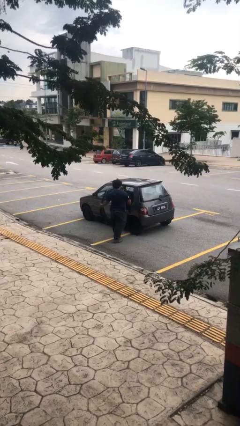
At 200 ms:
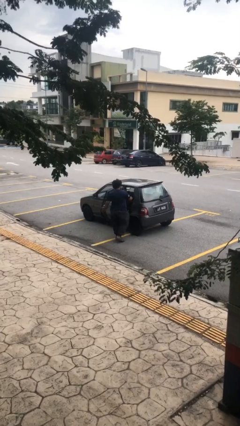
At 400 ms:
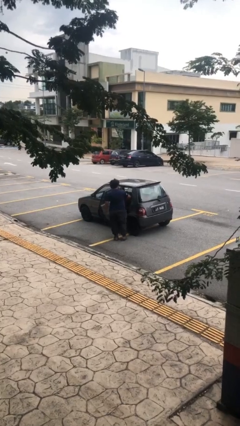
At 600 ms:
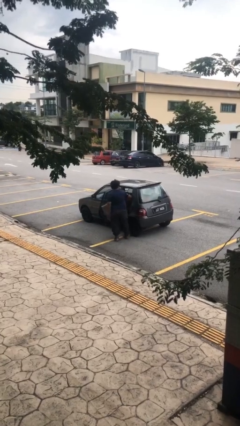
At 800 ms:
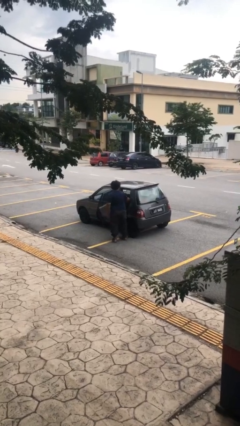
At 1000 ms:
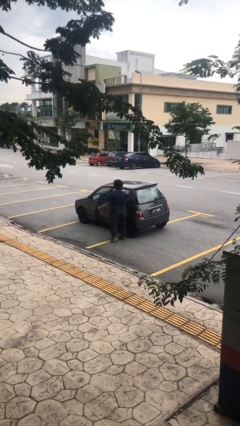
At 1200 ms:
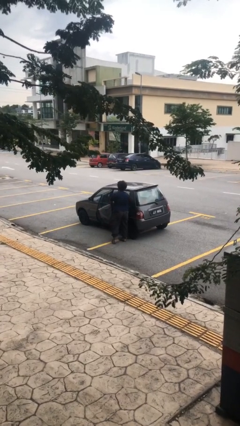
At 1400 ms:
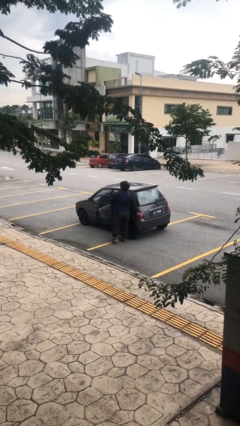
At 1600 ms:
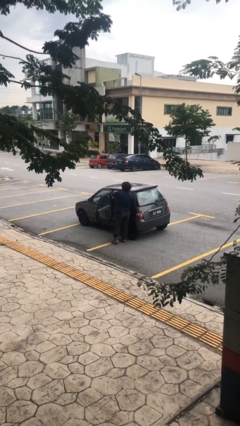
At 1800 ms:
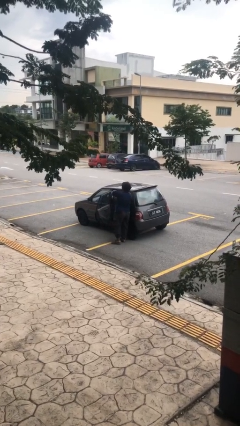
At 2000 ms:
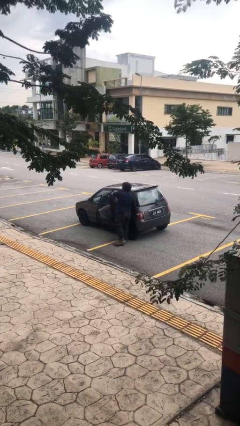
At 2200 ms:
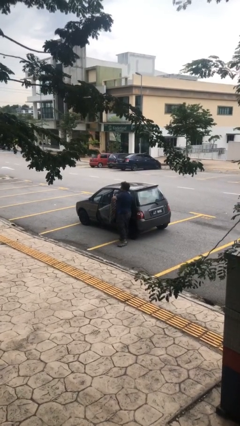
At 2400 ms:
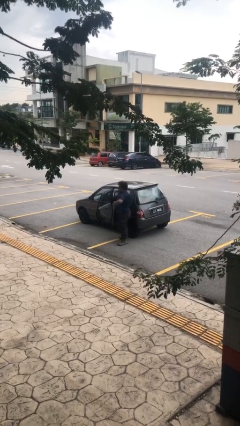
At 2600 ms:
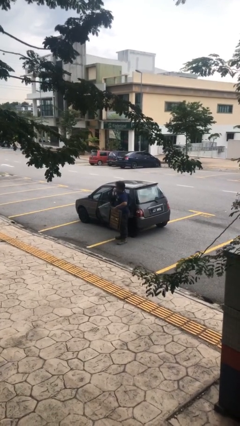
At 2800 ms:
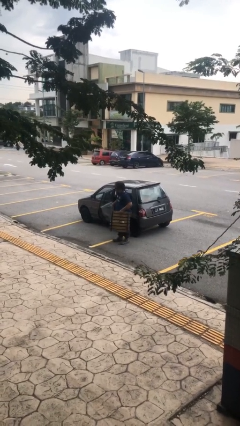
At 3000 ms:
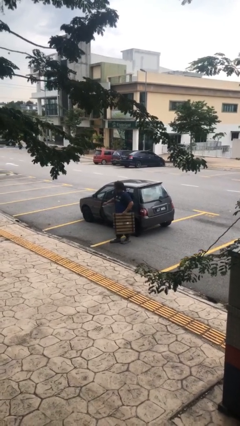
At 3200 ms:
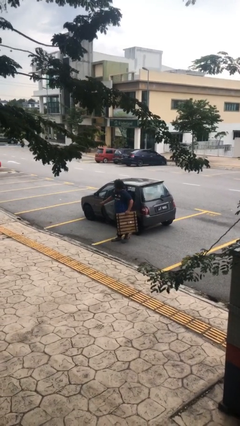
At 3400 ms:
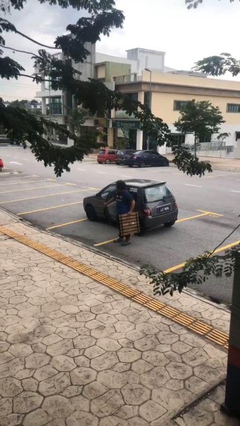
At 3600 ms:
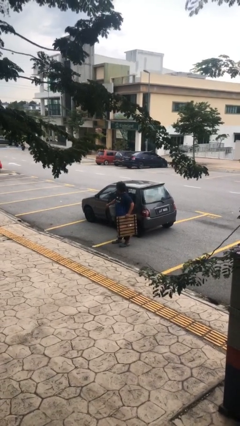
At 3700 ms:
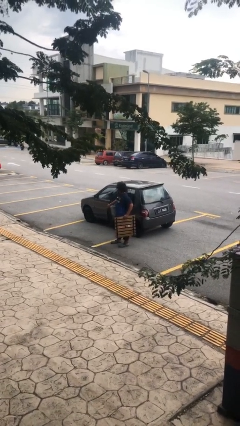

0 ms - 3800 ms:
person unloads car

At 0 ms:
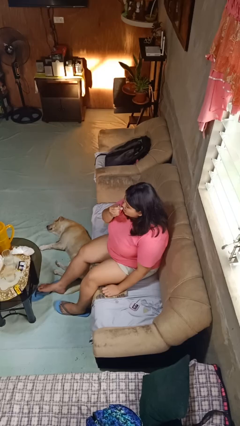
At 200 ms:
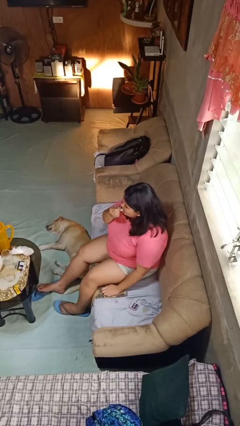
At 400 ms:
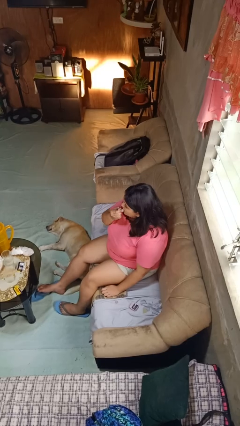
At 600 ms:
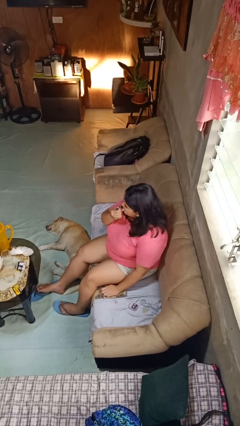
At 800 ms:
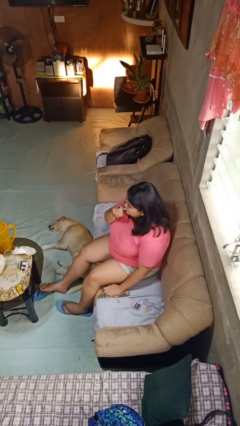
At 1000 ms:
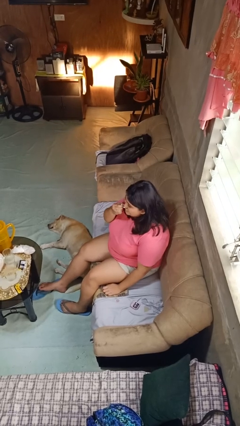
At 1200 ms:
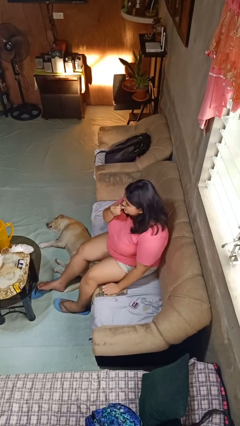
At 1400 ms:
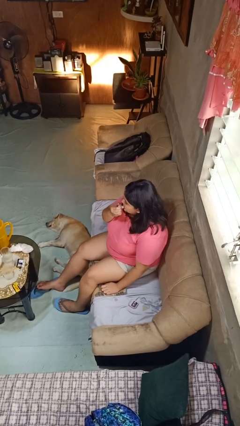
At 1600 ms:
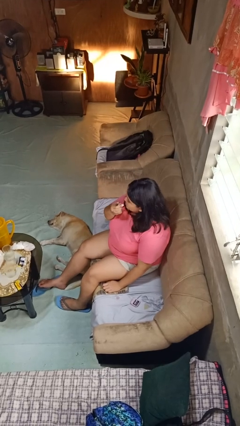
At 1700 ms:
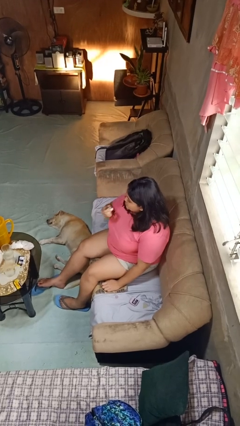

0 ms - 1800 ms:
person applies lip makeup

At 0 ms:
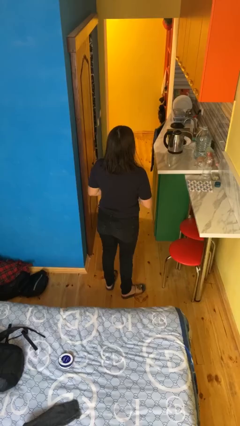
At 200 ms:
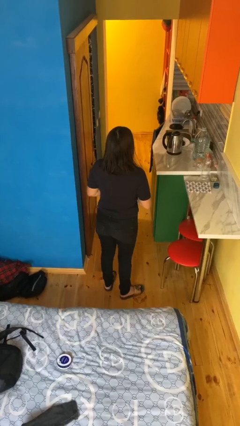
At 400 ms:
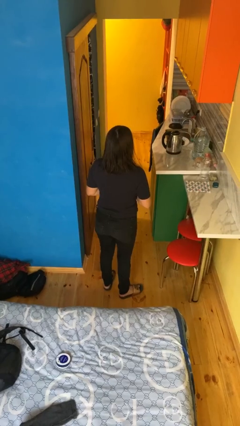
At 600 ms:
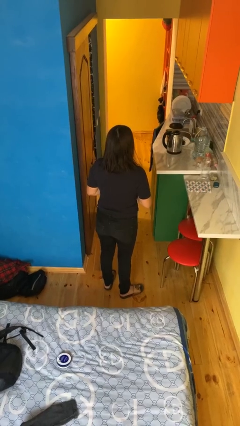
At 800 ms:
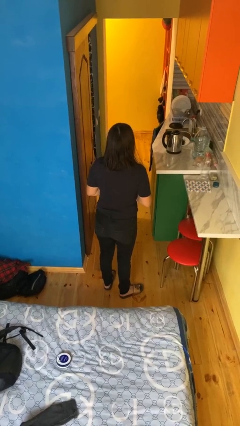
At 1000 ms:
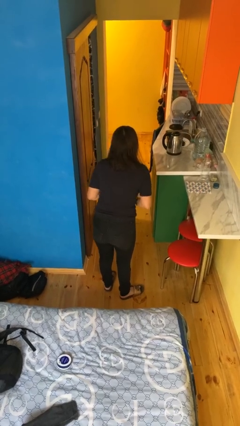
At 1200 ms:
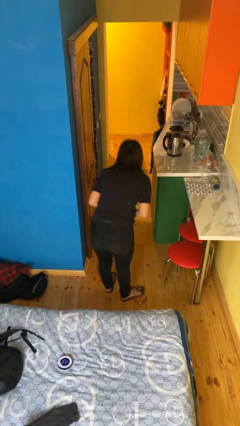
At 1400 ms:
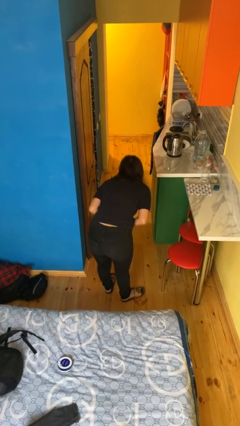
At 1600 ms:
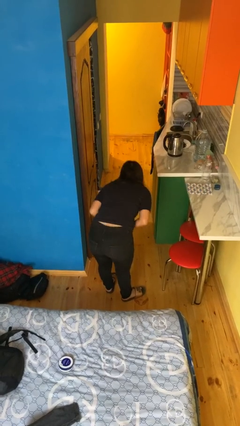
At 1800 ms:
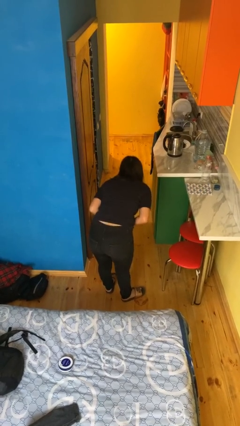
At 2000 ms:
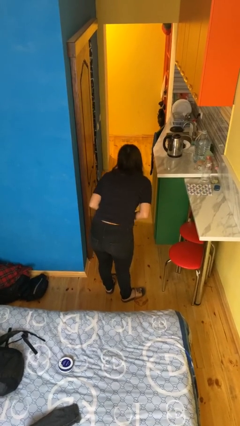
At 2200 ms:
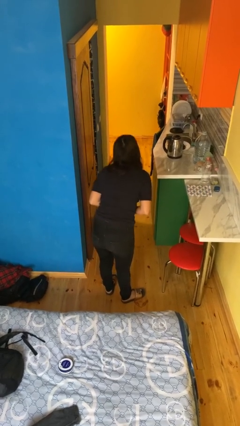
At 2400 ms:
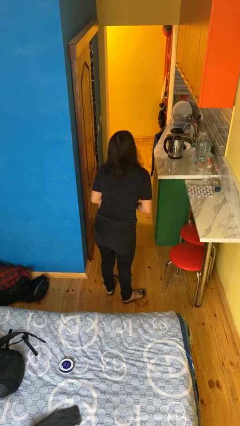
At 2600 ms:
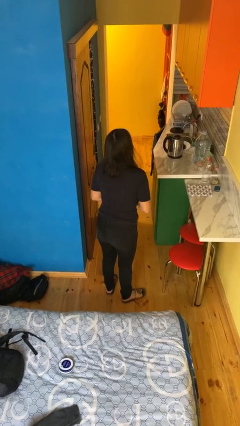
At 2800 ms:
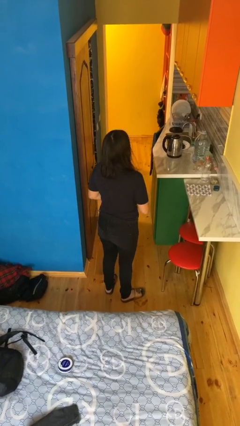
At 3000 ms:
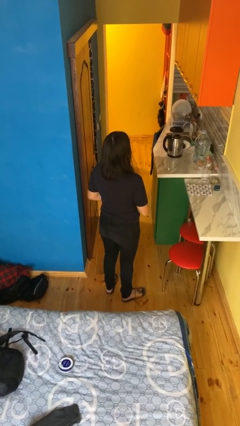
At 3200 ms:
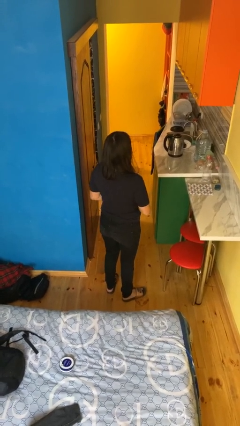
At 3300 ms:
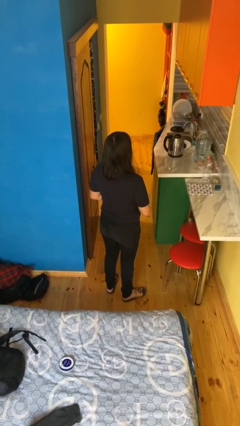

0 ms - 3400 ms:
person bows

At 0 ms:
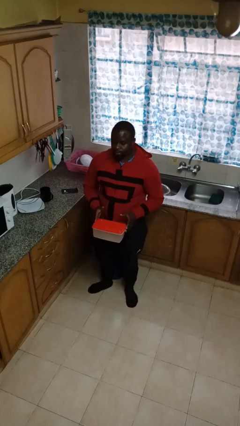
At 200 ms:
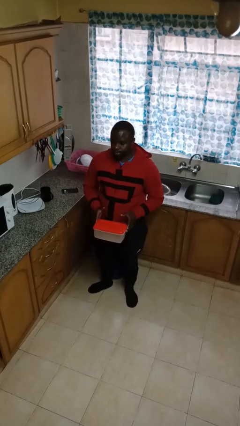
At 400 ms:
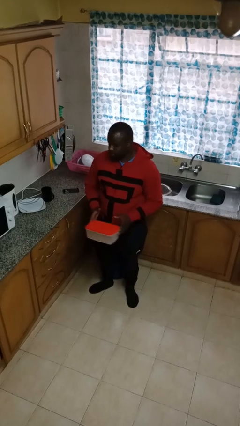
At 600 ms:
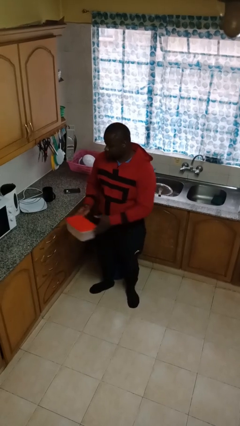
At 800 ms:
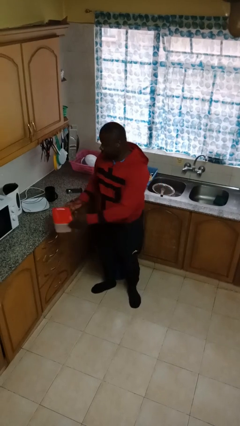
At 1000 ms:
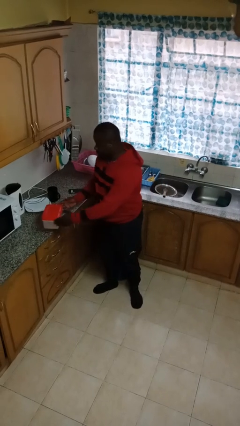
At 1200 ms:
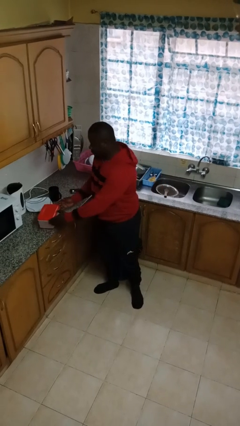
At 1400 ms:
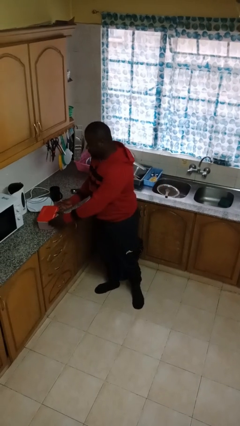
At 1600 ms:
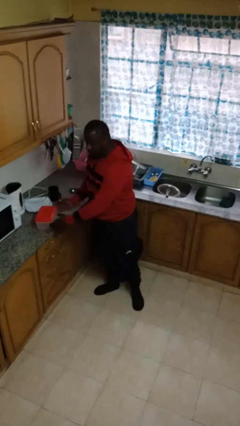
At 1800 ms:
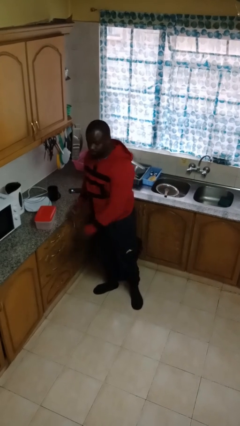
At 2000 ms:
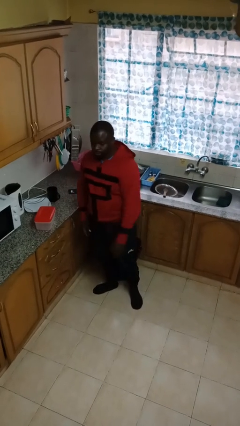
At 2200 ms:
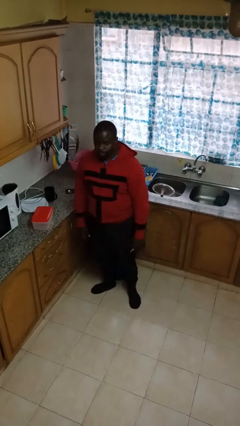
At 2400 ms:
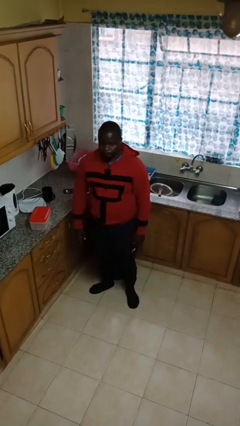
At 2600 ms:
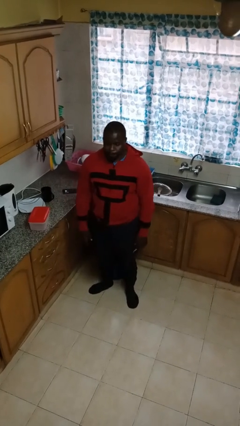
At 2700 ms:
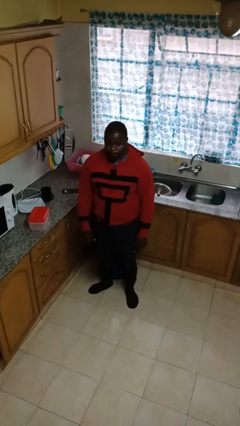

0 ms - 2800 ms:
person puts down object on countertop

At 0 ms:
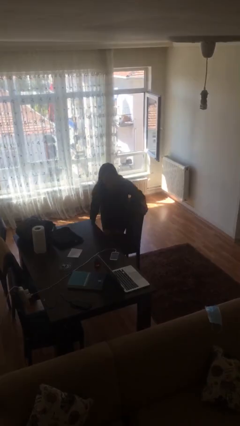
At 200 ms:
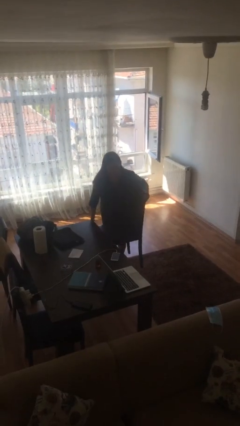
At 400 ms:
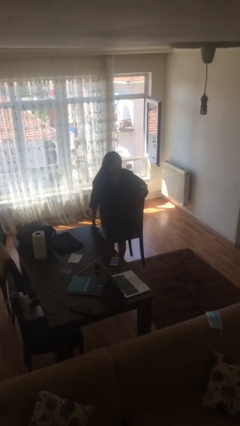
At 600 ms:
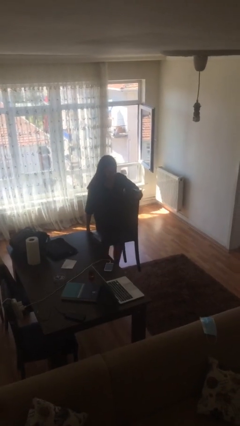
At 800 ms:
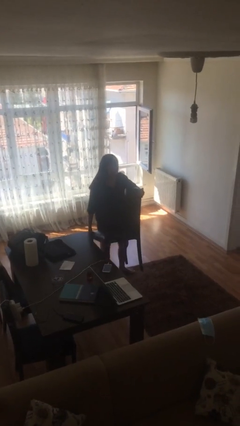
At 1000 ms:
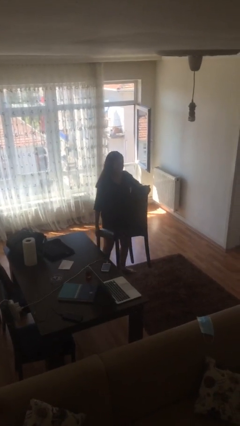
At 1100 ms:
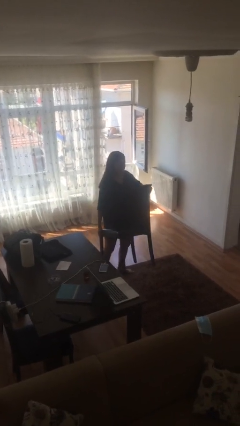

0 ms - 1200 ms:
person picks up object from floor

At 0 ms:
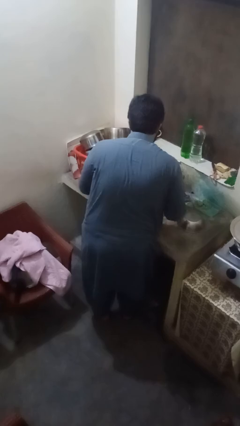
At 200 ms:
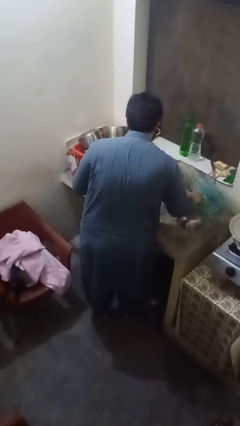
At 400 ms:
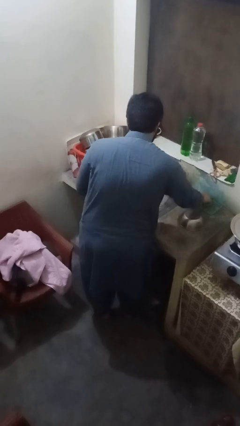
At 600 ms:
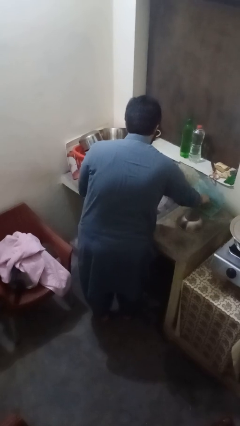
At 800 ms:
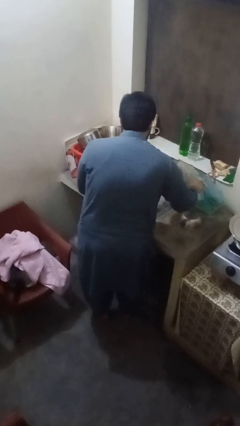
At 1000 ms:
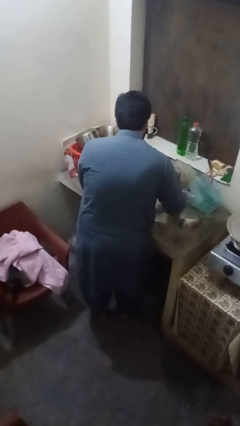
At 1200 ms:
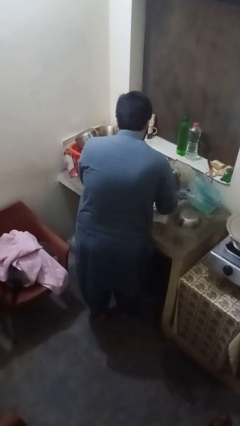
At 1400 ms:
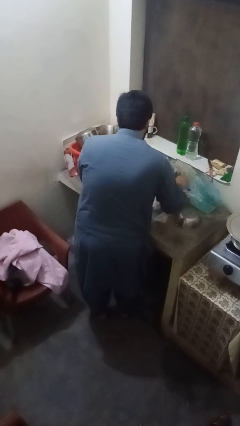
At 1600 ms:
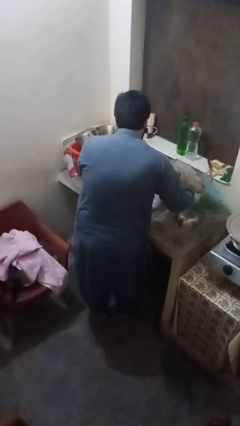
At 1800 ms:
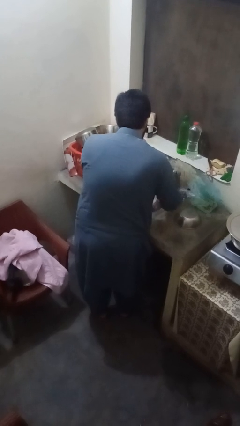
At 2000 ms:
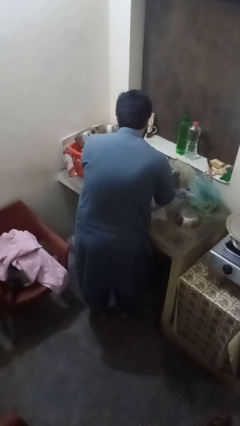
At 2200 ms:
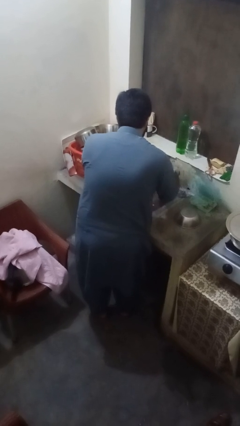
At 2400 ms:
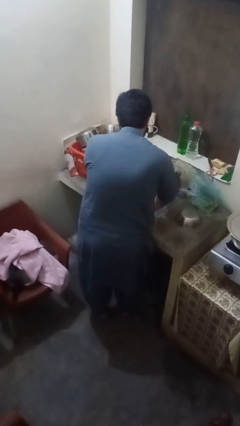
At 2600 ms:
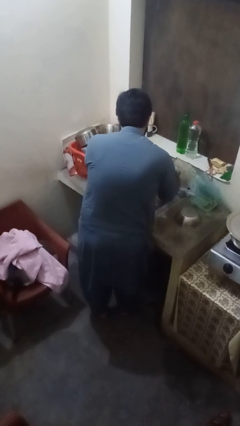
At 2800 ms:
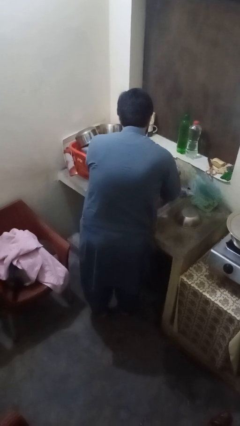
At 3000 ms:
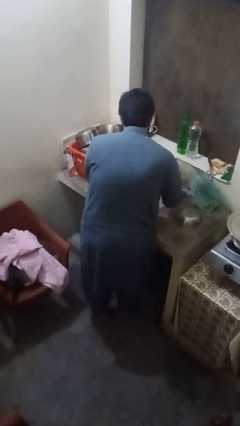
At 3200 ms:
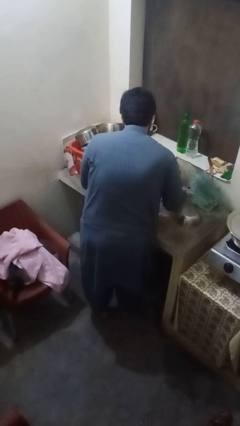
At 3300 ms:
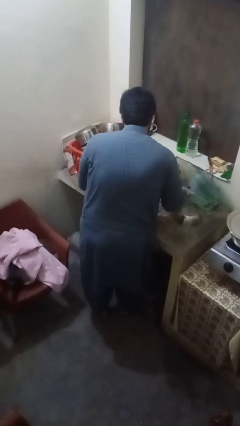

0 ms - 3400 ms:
person washes dish

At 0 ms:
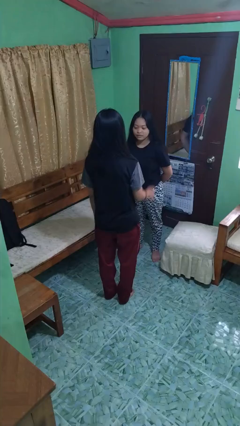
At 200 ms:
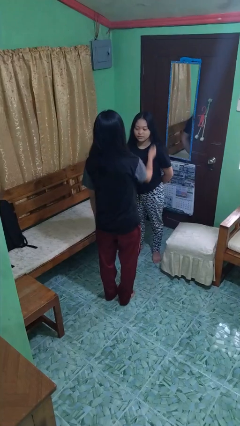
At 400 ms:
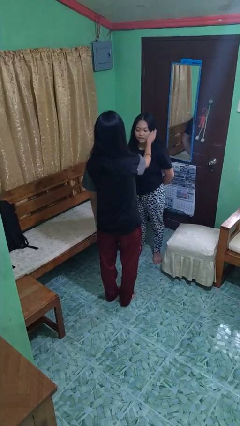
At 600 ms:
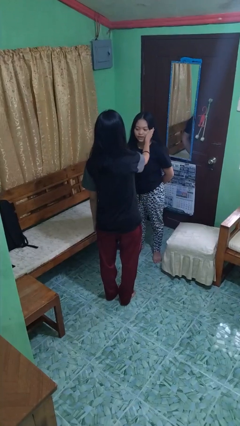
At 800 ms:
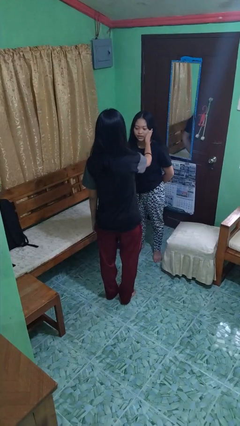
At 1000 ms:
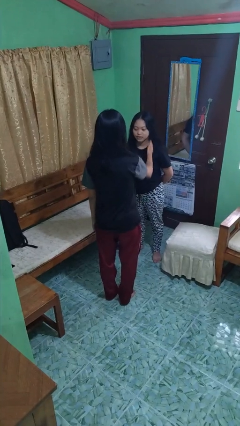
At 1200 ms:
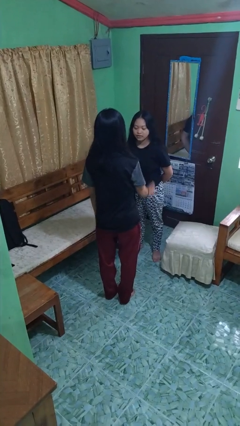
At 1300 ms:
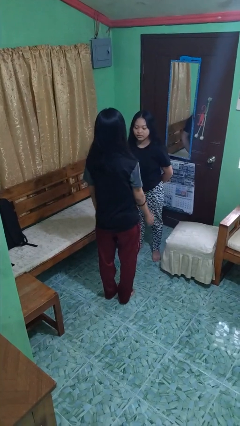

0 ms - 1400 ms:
person touches face of person
